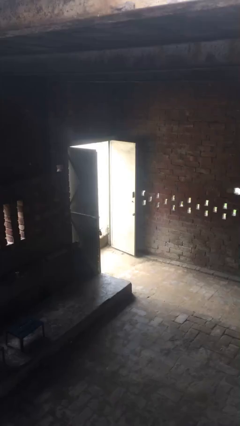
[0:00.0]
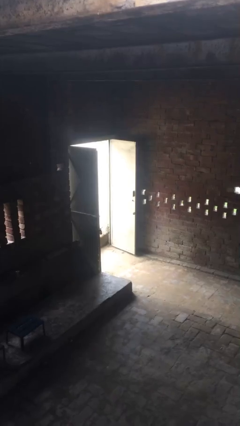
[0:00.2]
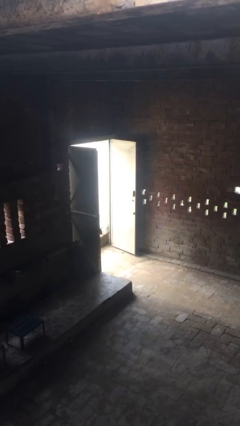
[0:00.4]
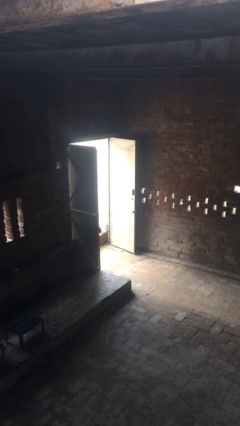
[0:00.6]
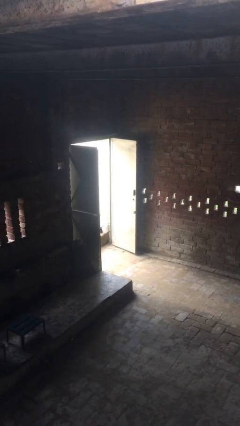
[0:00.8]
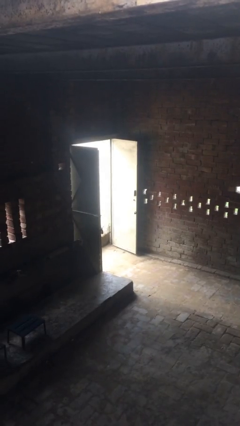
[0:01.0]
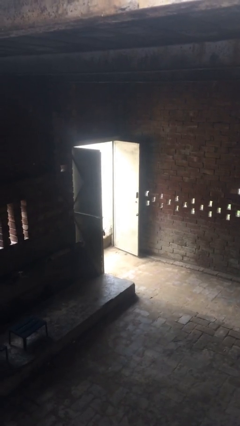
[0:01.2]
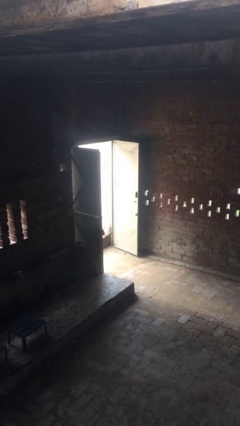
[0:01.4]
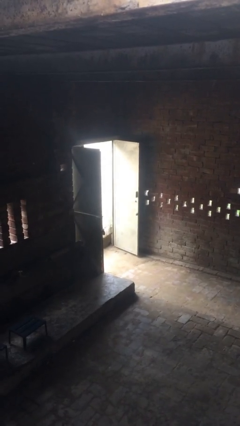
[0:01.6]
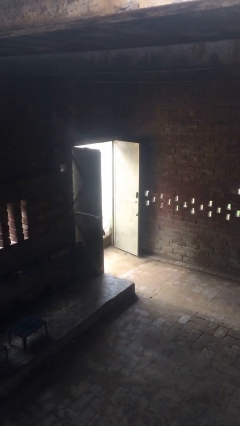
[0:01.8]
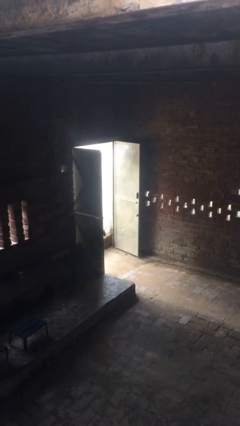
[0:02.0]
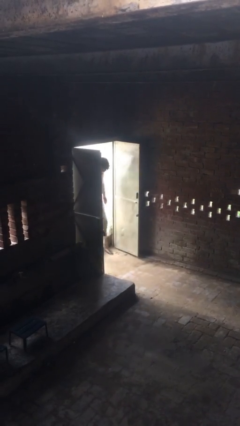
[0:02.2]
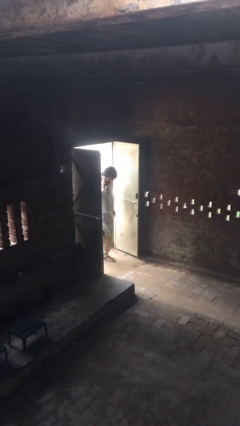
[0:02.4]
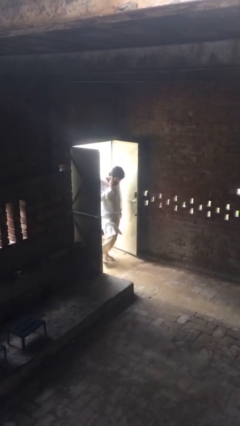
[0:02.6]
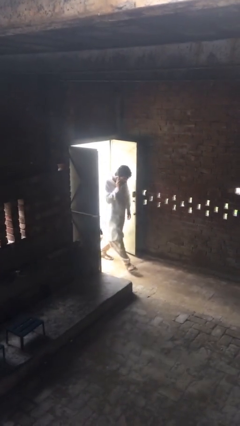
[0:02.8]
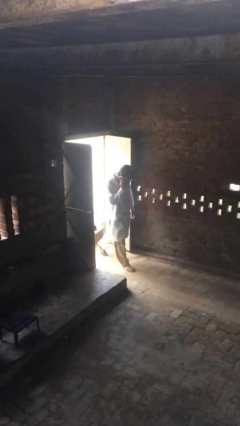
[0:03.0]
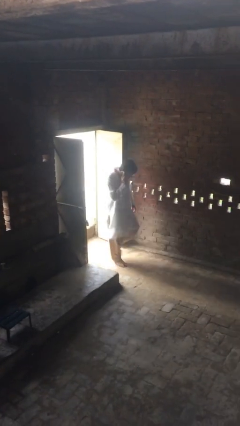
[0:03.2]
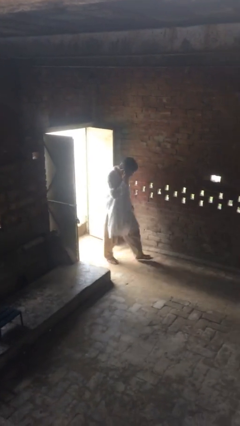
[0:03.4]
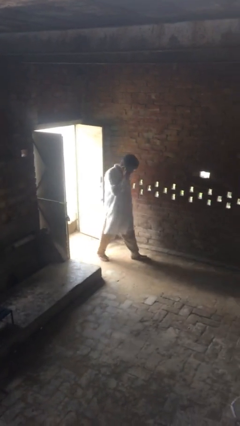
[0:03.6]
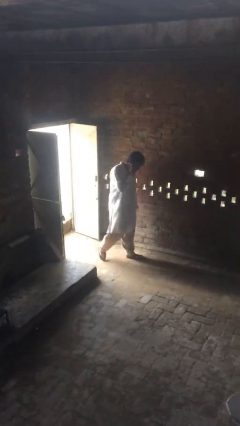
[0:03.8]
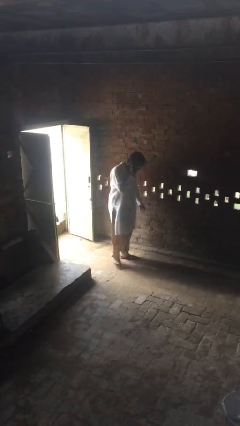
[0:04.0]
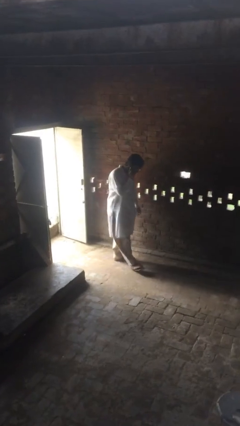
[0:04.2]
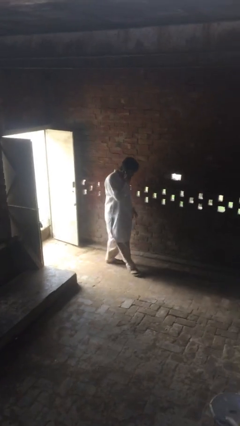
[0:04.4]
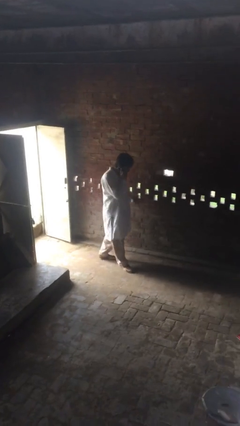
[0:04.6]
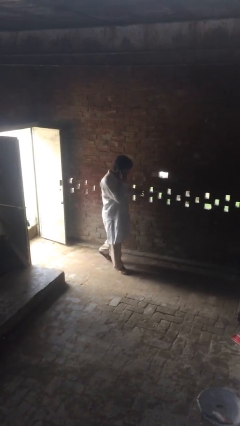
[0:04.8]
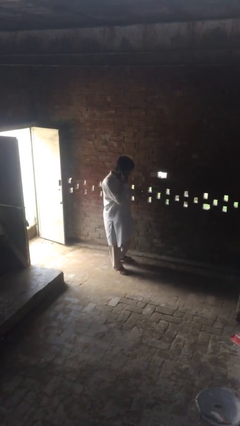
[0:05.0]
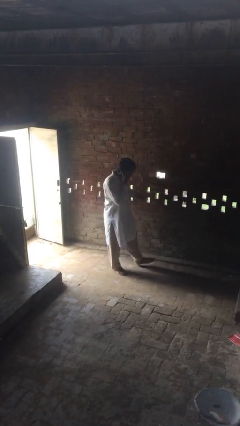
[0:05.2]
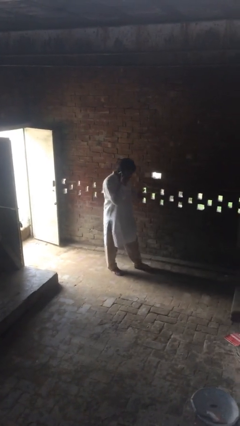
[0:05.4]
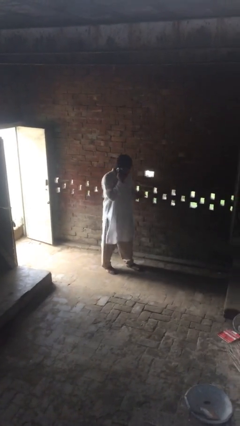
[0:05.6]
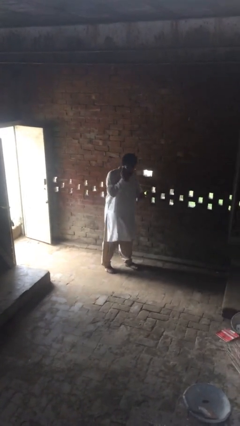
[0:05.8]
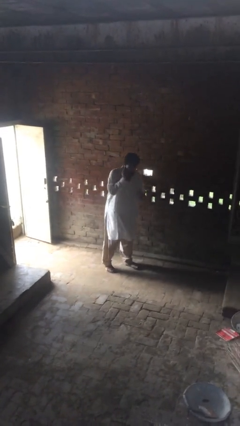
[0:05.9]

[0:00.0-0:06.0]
person enters scene through structure

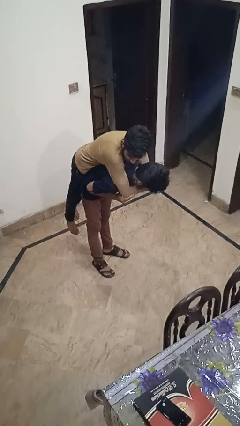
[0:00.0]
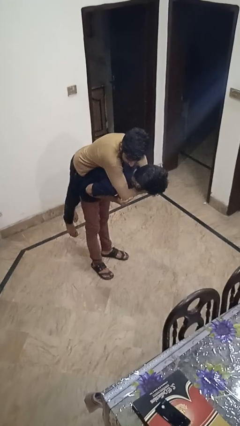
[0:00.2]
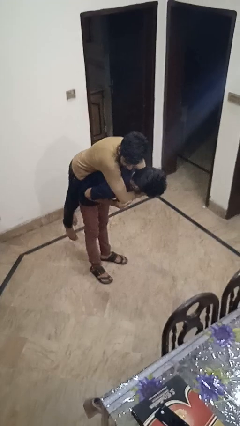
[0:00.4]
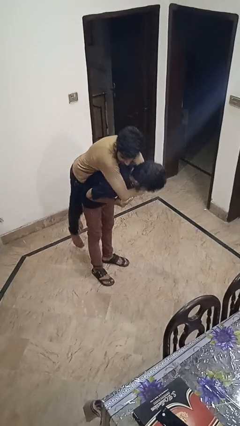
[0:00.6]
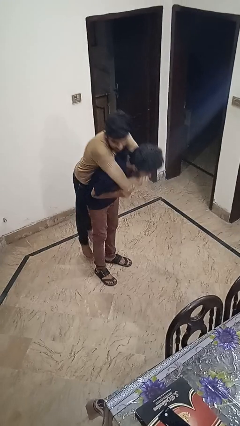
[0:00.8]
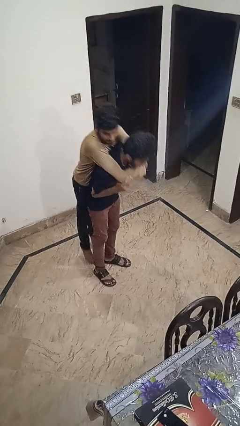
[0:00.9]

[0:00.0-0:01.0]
person puts down person

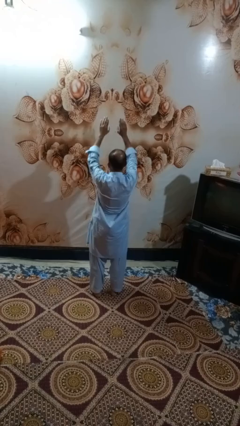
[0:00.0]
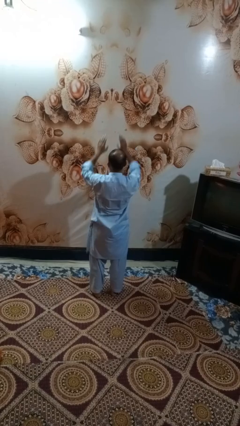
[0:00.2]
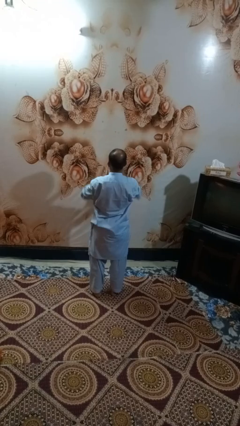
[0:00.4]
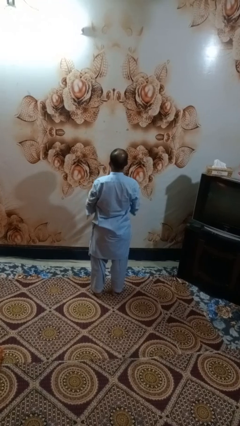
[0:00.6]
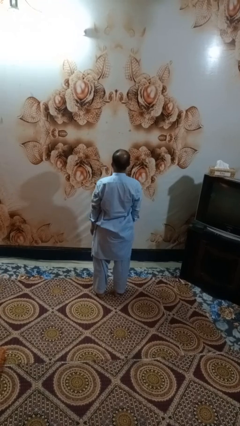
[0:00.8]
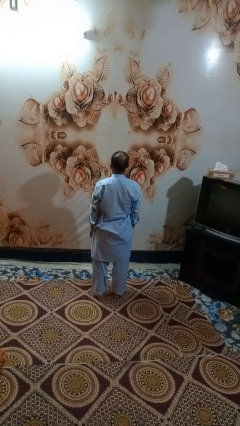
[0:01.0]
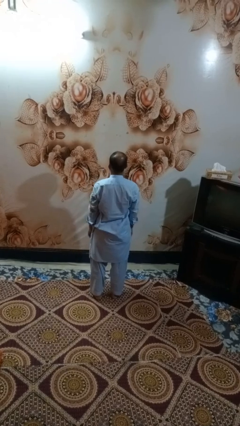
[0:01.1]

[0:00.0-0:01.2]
person gestures swipe down

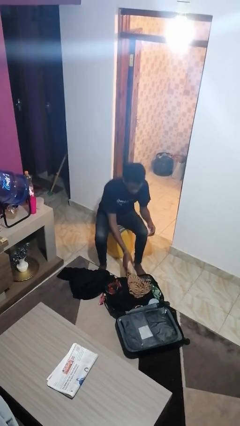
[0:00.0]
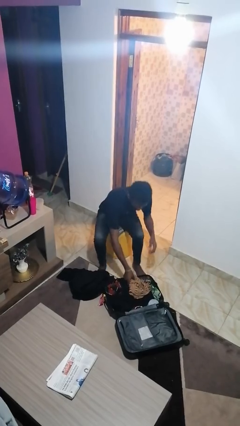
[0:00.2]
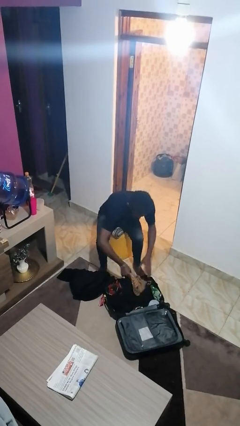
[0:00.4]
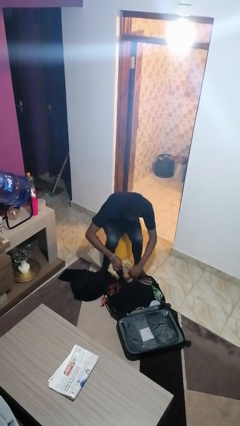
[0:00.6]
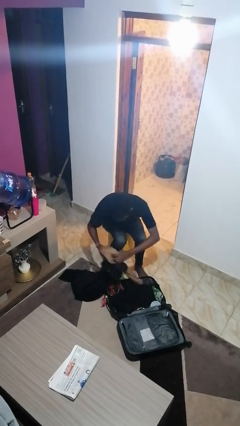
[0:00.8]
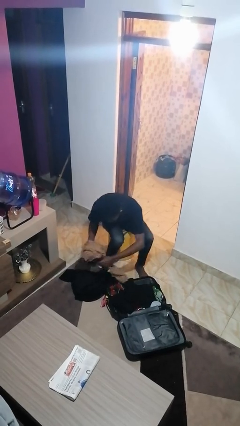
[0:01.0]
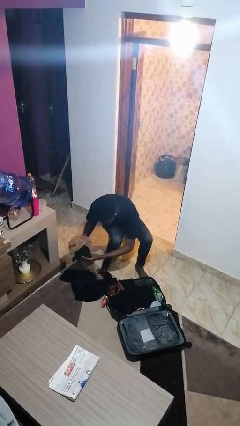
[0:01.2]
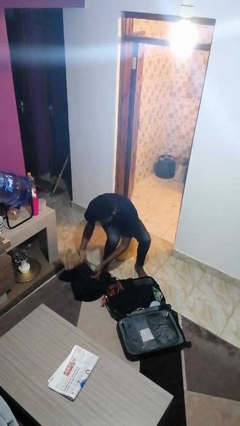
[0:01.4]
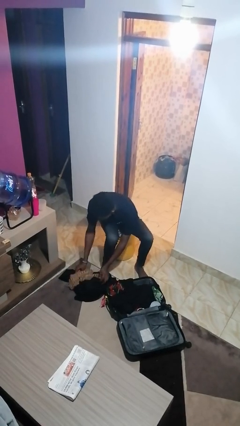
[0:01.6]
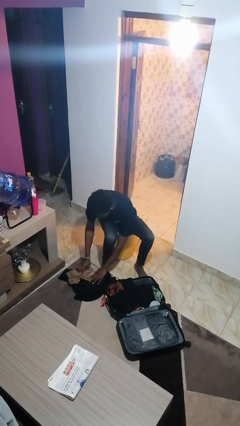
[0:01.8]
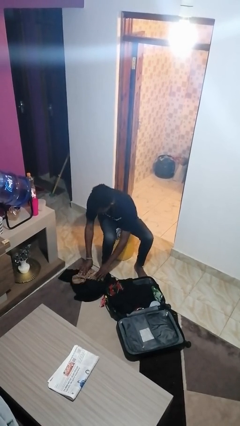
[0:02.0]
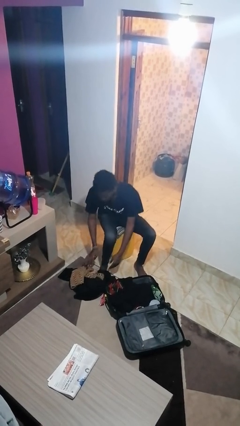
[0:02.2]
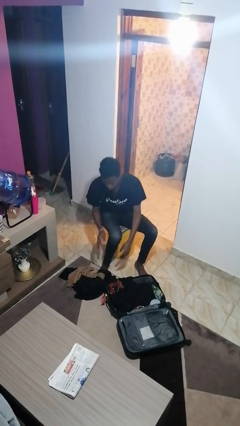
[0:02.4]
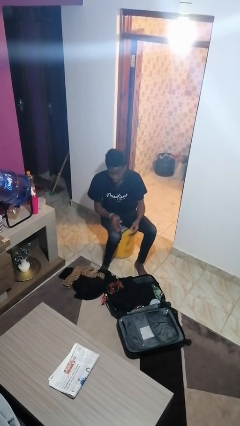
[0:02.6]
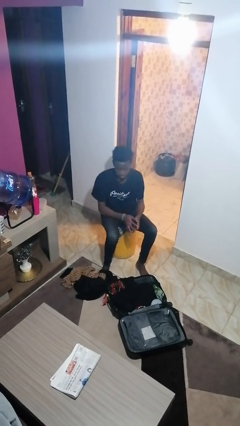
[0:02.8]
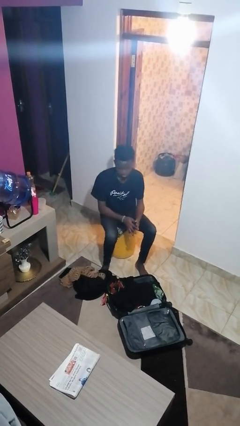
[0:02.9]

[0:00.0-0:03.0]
person unloads clothes from suitcase

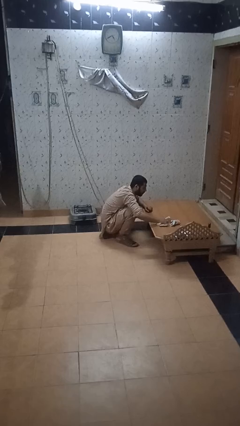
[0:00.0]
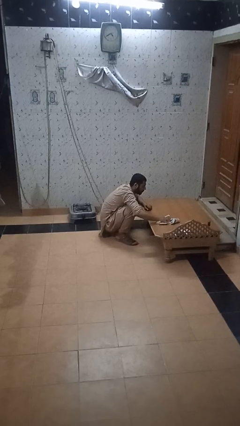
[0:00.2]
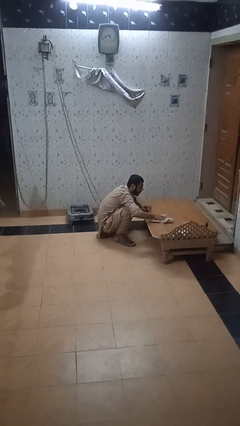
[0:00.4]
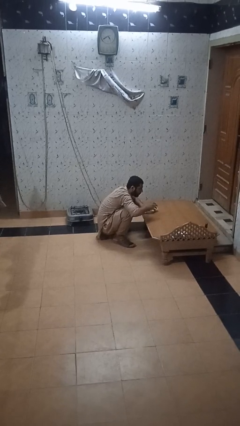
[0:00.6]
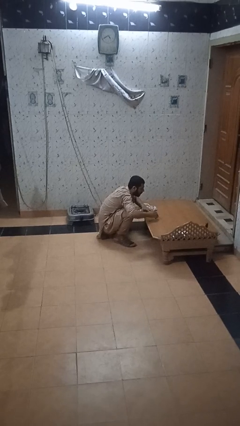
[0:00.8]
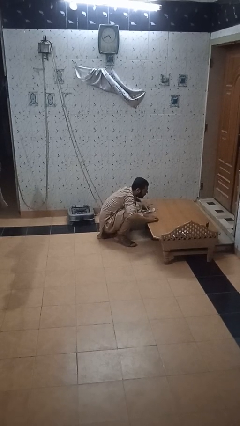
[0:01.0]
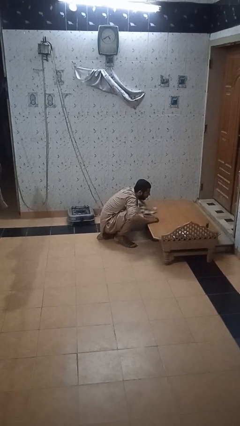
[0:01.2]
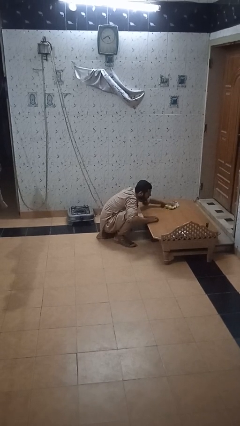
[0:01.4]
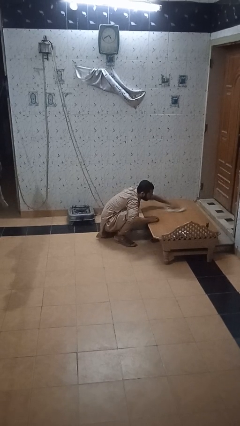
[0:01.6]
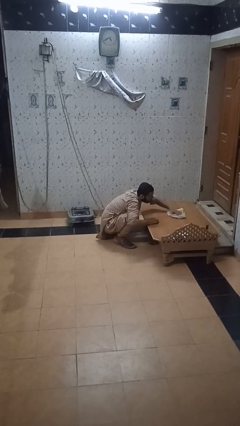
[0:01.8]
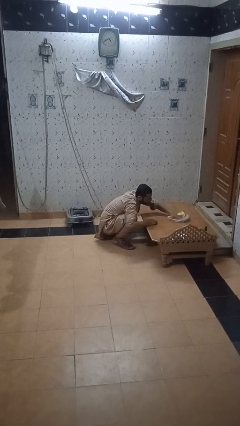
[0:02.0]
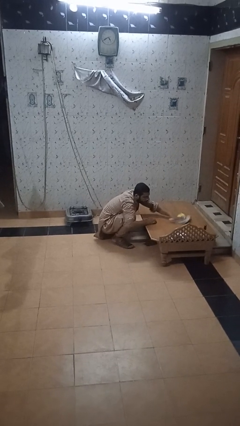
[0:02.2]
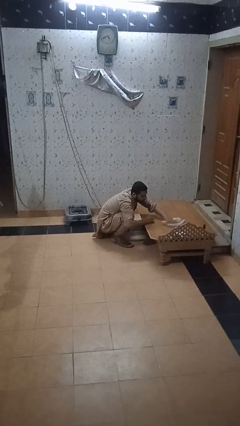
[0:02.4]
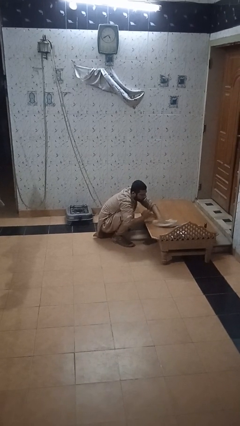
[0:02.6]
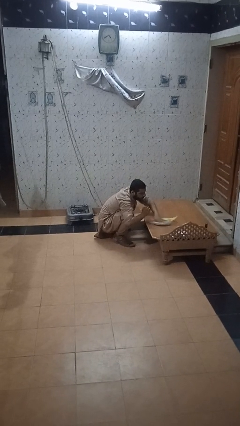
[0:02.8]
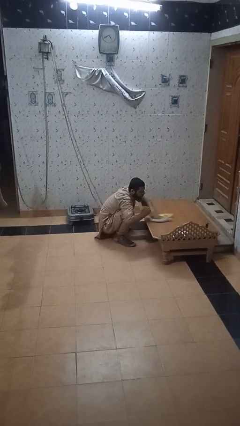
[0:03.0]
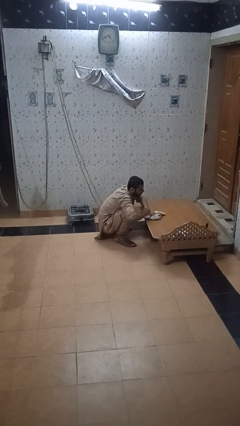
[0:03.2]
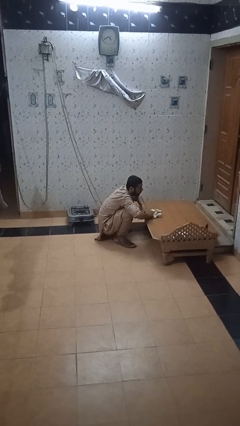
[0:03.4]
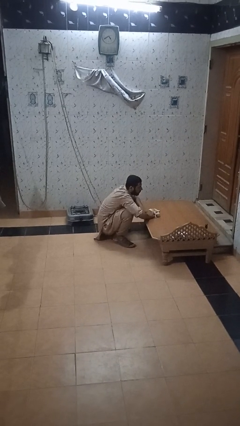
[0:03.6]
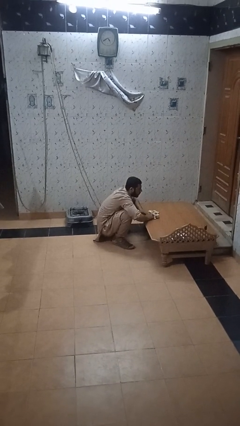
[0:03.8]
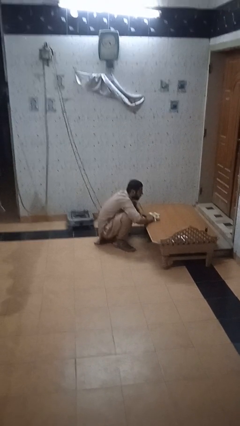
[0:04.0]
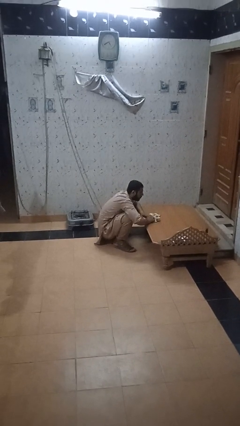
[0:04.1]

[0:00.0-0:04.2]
person cleans table with rag

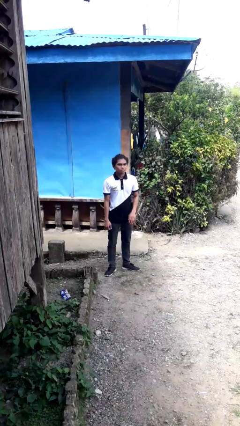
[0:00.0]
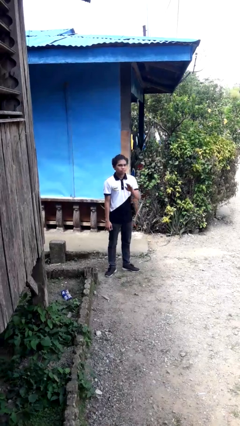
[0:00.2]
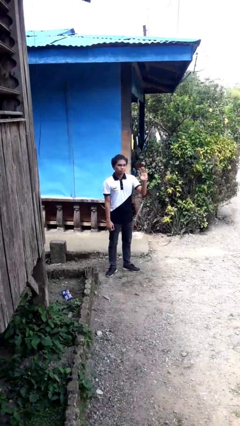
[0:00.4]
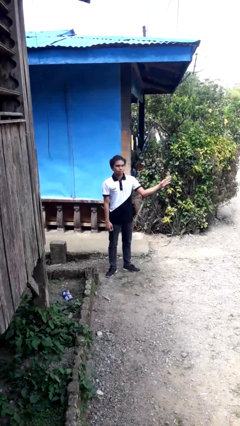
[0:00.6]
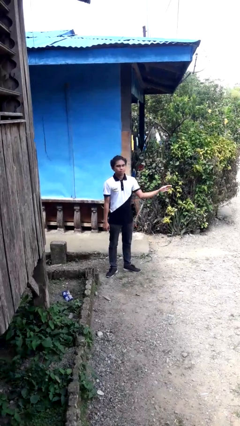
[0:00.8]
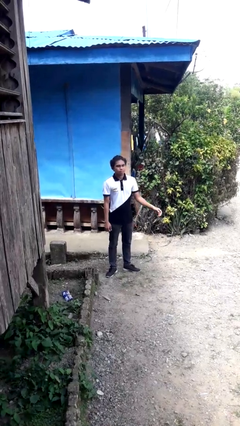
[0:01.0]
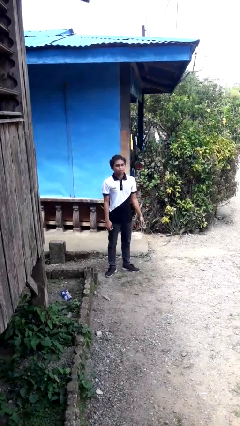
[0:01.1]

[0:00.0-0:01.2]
person gestures swipe left

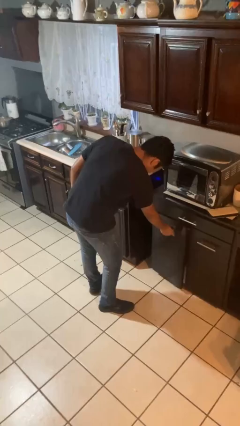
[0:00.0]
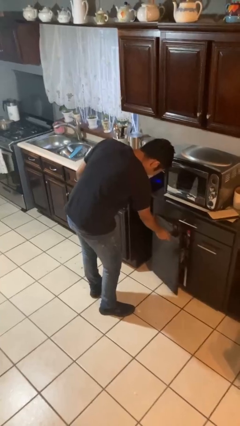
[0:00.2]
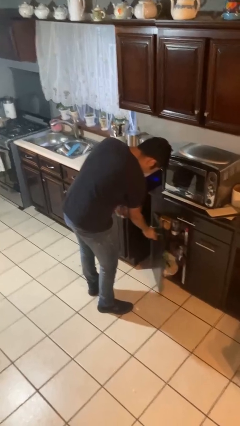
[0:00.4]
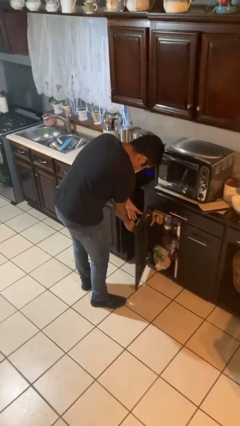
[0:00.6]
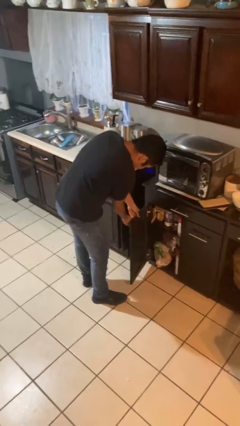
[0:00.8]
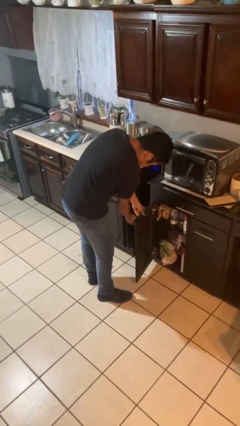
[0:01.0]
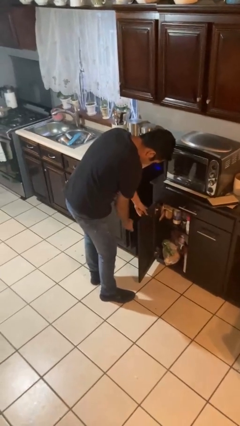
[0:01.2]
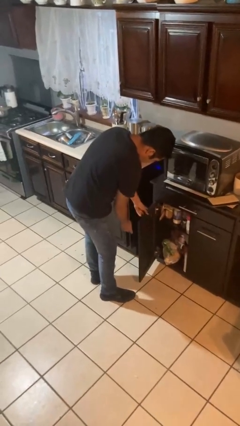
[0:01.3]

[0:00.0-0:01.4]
person opens cabinet
